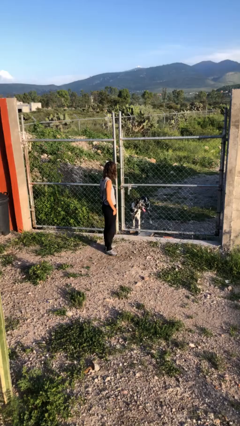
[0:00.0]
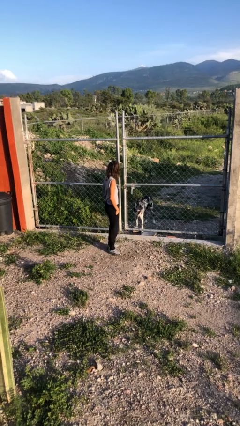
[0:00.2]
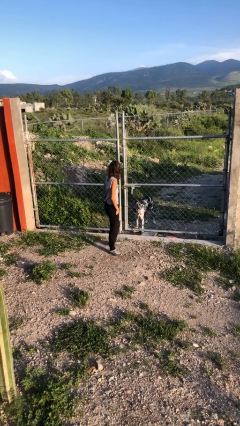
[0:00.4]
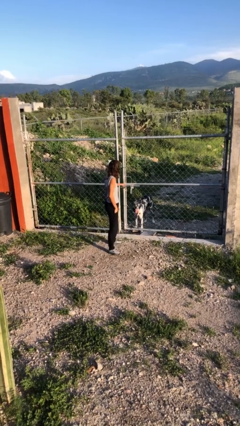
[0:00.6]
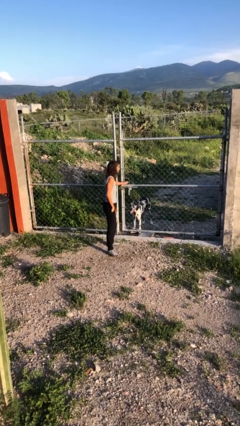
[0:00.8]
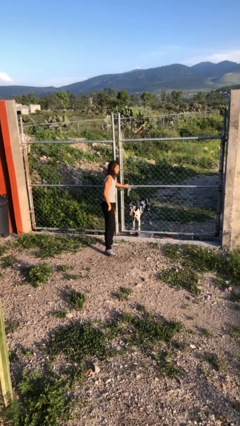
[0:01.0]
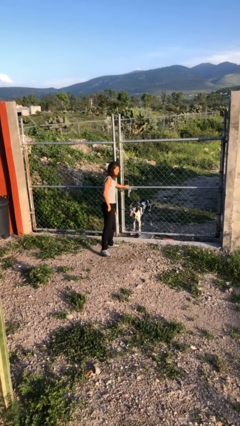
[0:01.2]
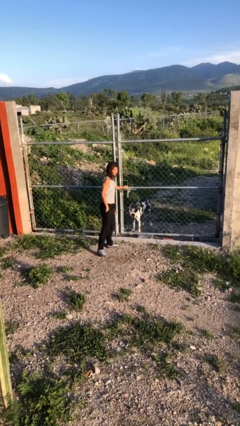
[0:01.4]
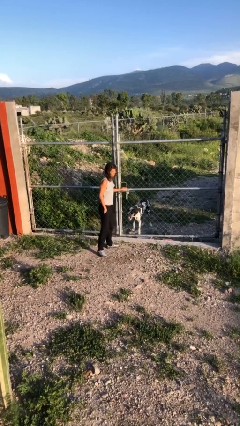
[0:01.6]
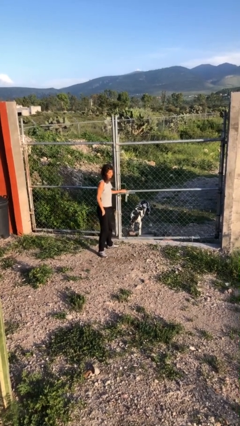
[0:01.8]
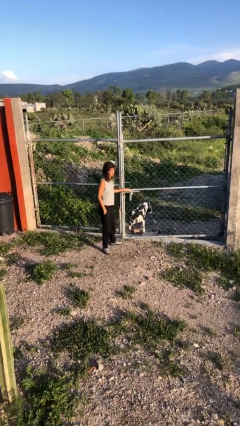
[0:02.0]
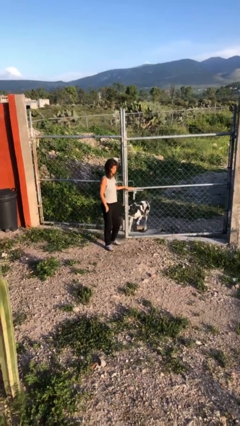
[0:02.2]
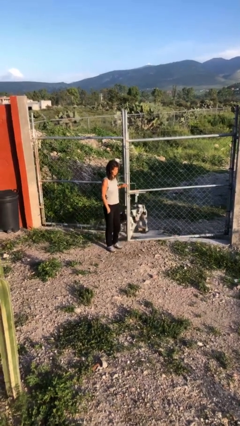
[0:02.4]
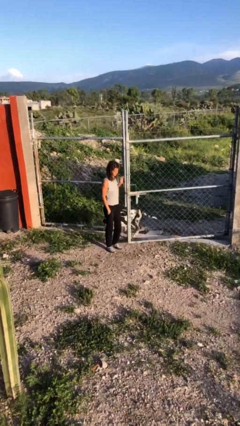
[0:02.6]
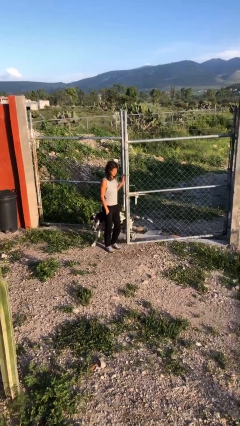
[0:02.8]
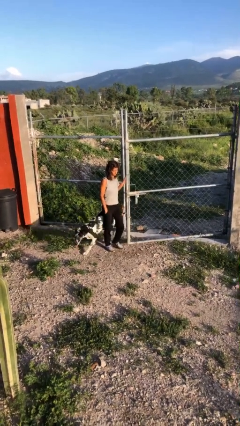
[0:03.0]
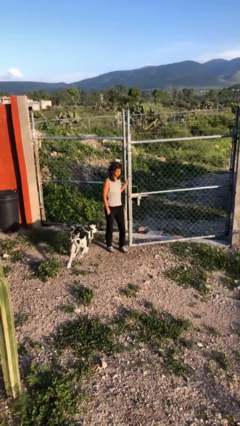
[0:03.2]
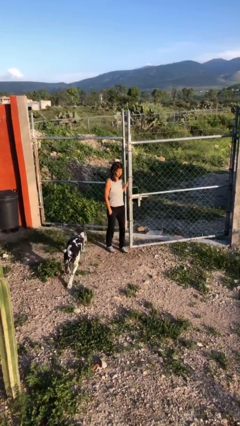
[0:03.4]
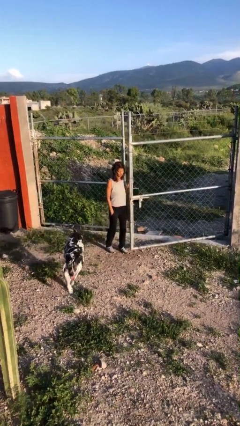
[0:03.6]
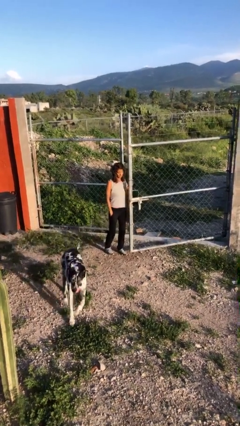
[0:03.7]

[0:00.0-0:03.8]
person opens gate

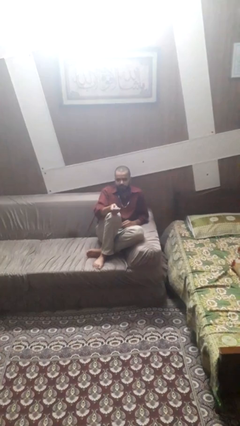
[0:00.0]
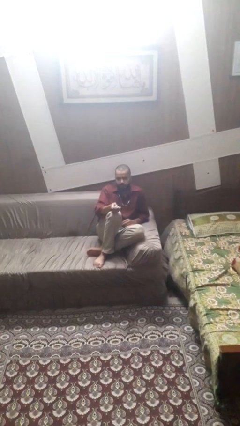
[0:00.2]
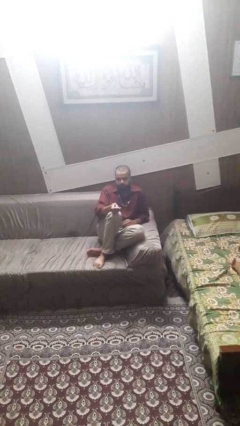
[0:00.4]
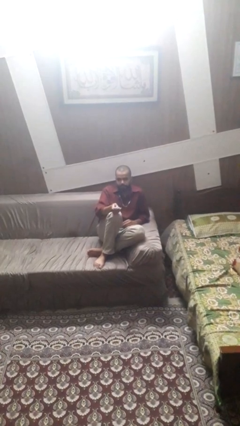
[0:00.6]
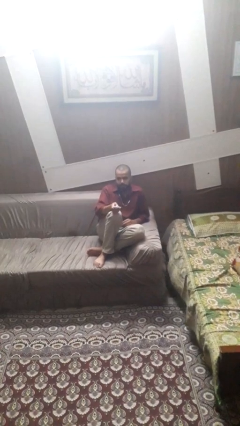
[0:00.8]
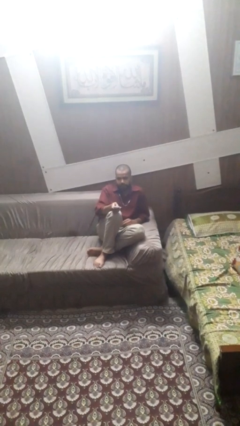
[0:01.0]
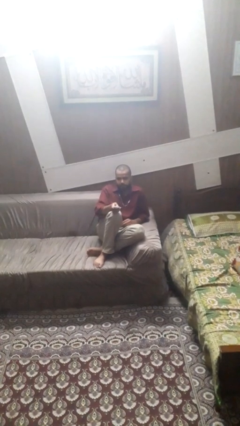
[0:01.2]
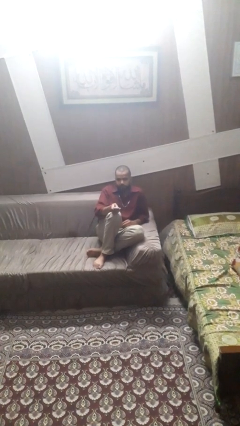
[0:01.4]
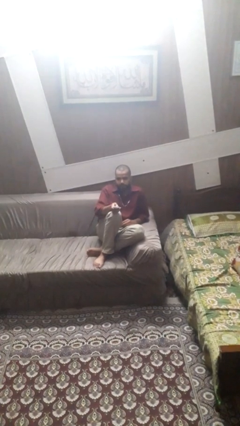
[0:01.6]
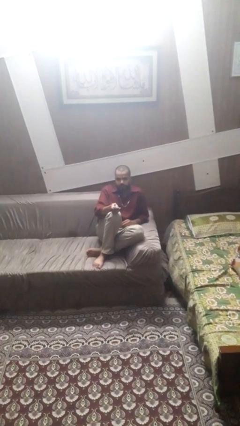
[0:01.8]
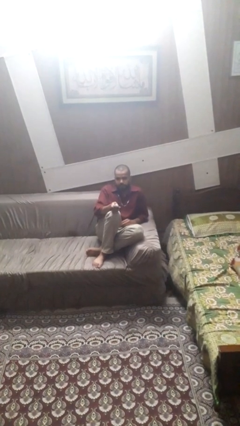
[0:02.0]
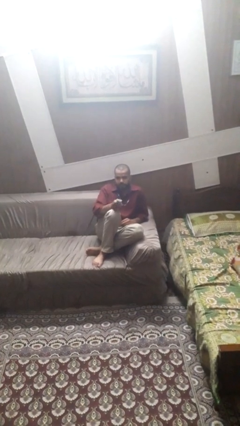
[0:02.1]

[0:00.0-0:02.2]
person uses television remote

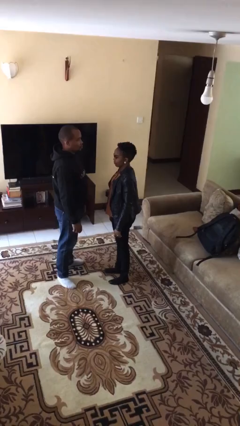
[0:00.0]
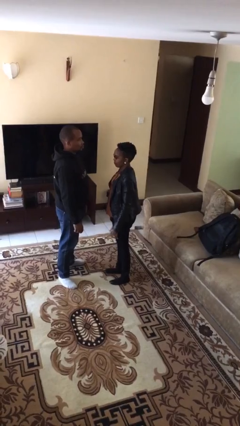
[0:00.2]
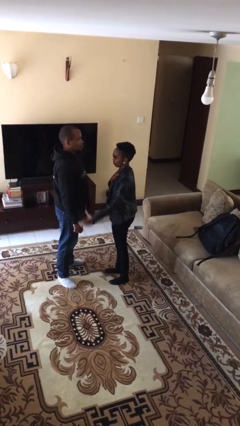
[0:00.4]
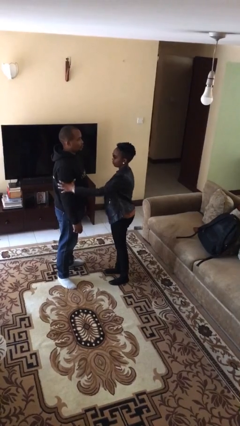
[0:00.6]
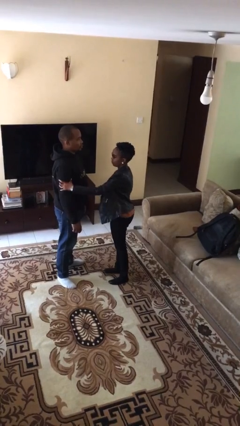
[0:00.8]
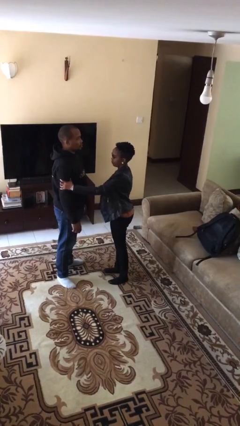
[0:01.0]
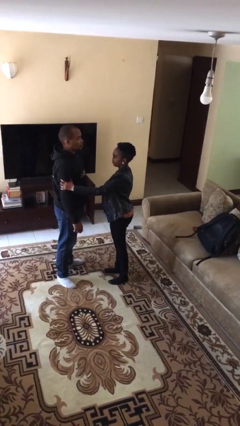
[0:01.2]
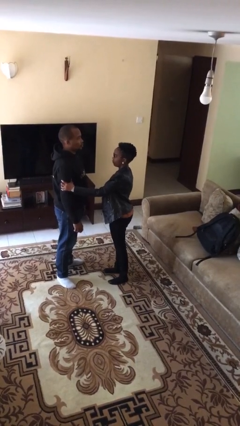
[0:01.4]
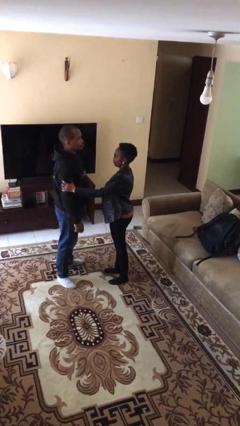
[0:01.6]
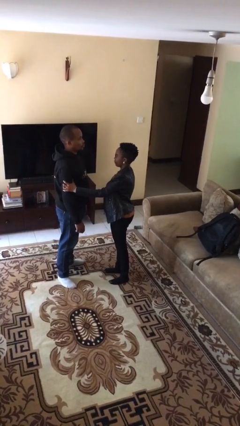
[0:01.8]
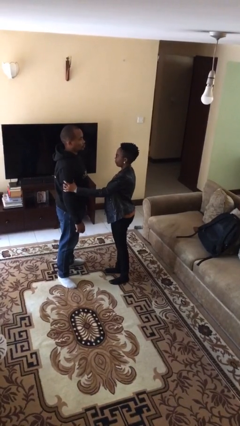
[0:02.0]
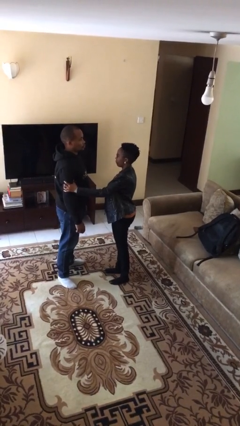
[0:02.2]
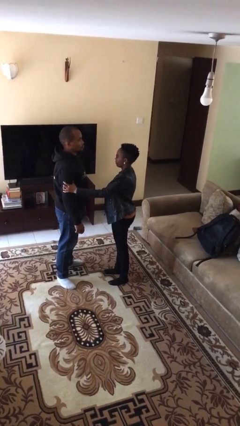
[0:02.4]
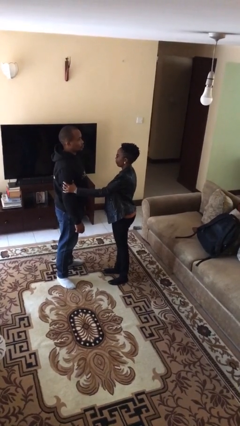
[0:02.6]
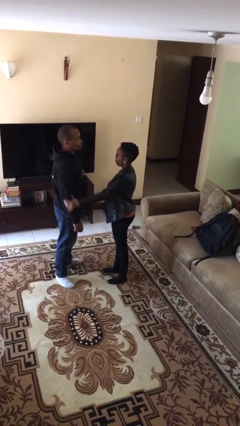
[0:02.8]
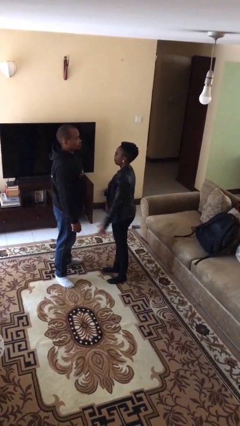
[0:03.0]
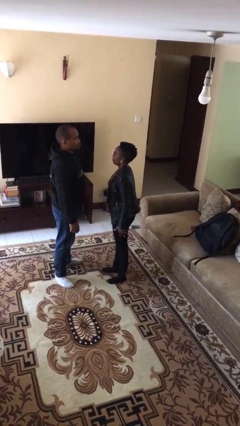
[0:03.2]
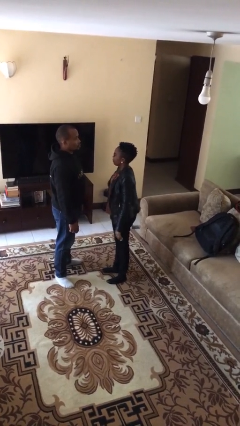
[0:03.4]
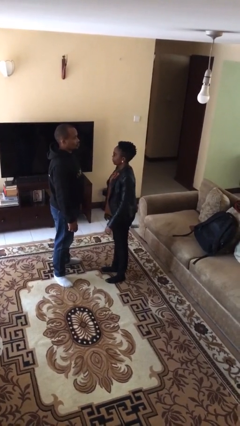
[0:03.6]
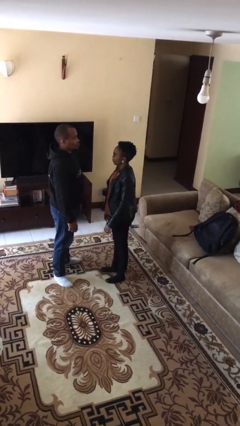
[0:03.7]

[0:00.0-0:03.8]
person grabs person by bicep

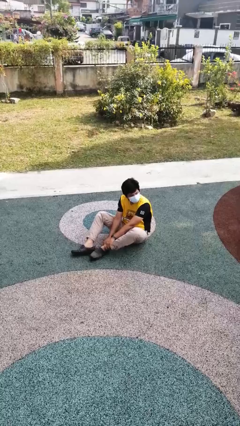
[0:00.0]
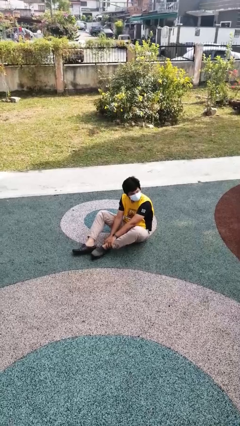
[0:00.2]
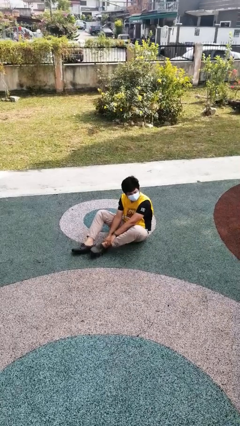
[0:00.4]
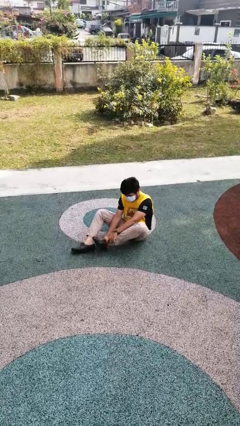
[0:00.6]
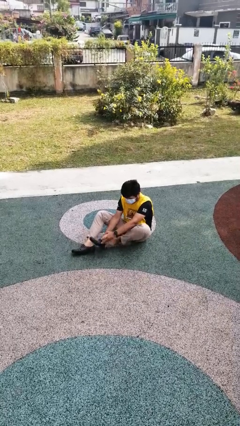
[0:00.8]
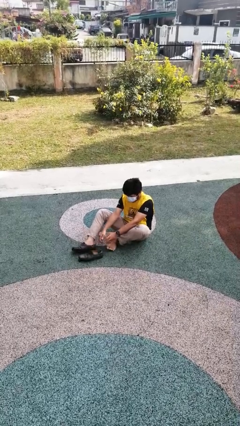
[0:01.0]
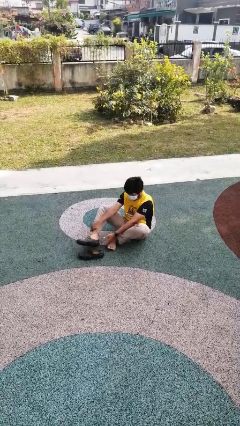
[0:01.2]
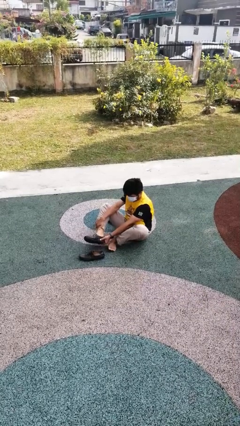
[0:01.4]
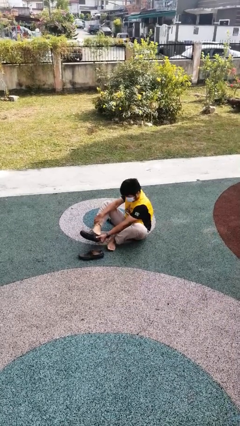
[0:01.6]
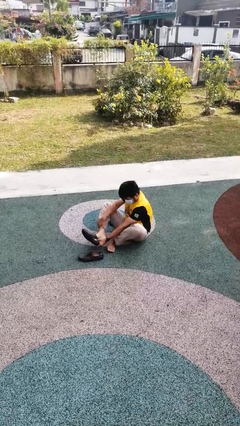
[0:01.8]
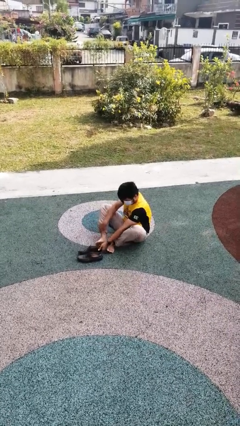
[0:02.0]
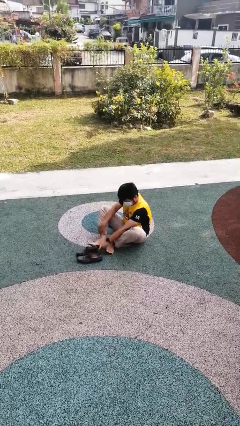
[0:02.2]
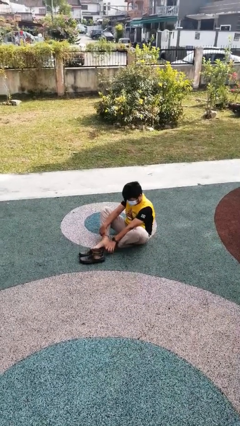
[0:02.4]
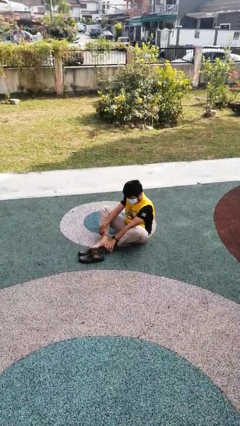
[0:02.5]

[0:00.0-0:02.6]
person takes off shoes

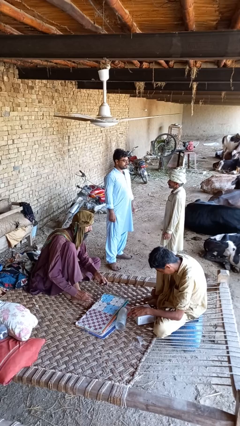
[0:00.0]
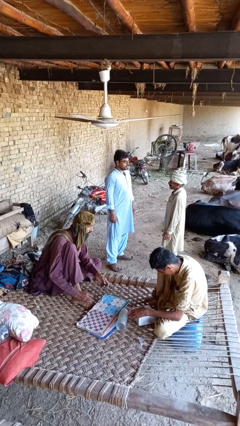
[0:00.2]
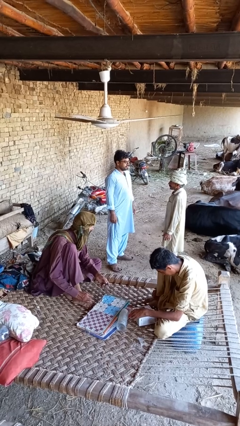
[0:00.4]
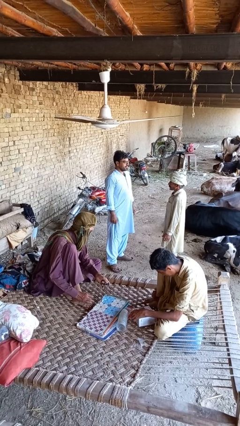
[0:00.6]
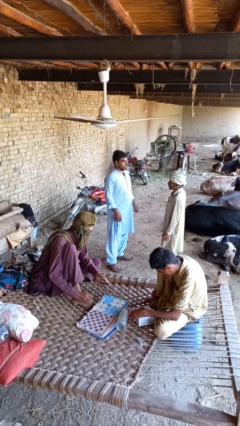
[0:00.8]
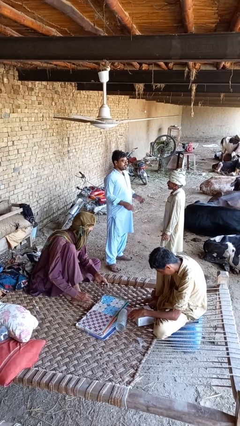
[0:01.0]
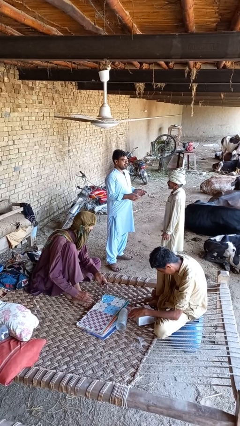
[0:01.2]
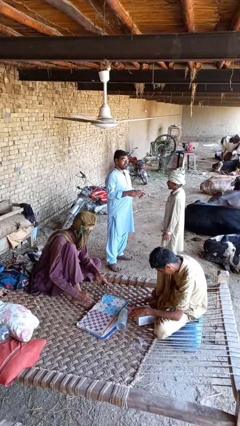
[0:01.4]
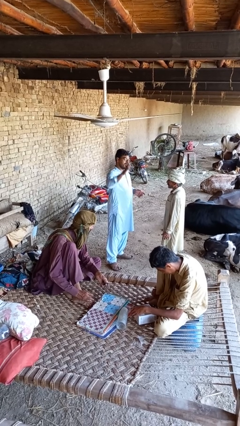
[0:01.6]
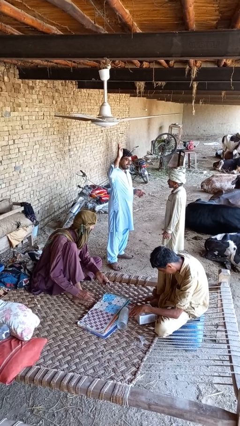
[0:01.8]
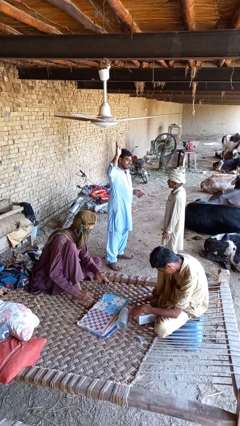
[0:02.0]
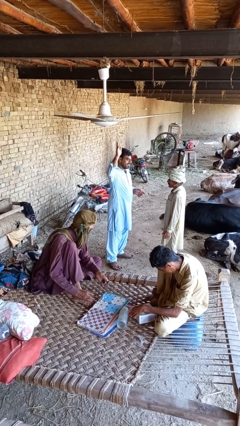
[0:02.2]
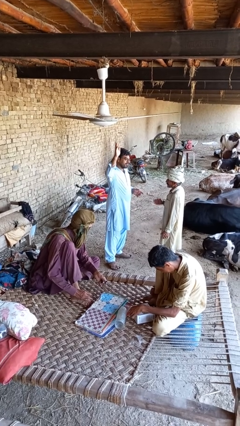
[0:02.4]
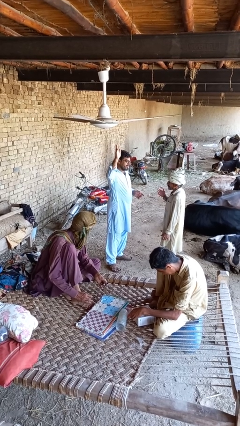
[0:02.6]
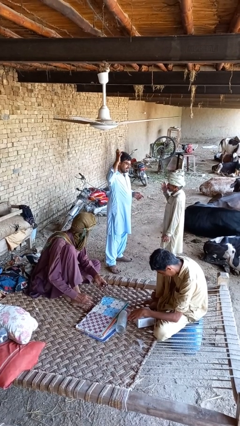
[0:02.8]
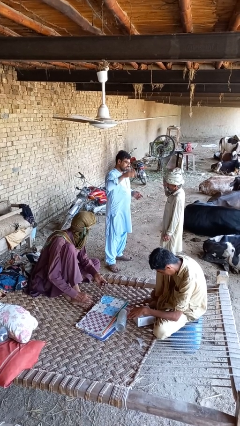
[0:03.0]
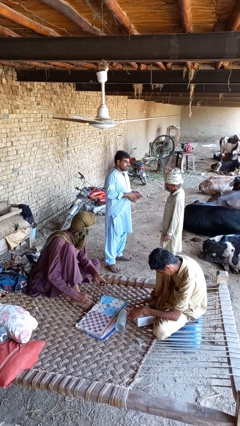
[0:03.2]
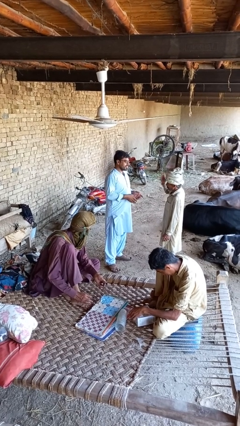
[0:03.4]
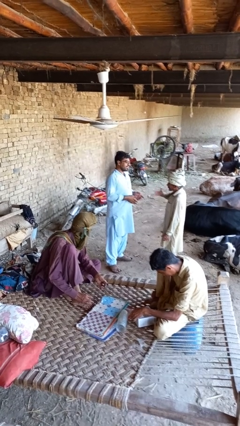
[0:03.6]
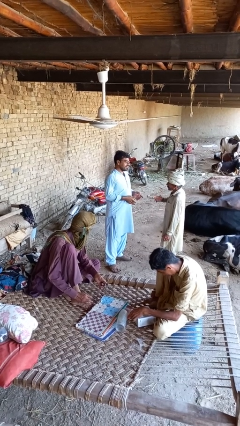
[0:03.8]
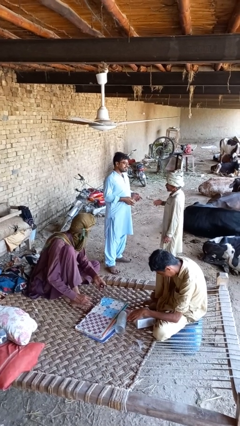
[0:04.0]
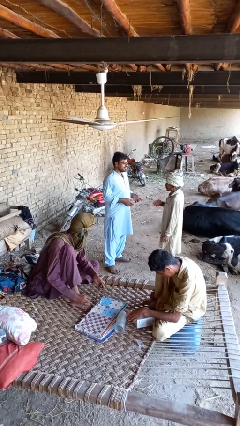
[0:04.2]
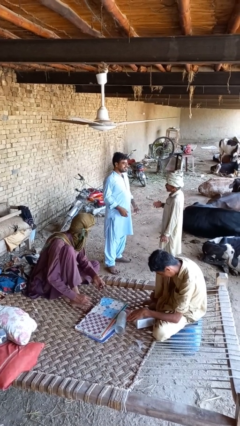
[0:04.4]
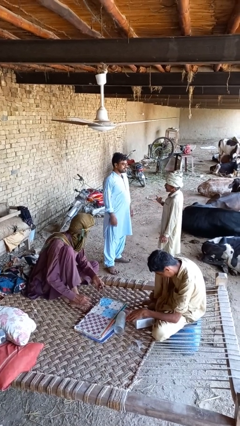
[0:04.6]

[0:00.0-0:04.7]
person talks to person

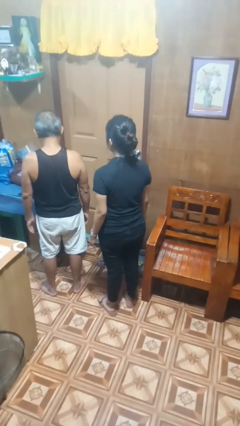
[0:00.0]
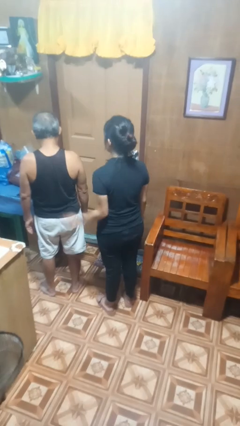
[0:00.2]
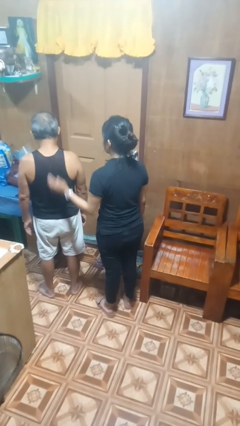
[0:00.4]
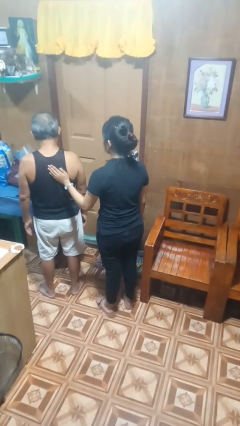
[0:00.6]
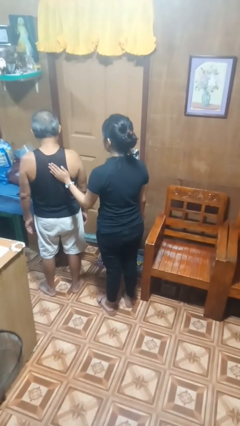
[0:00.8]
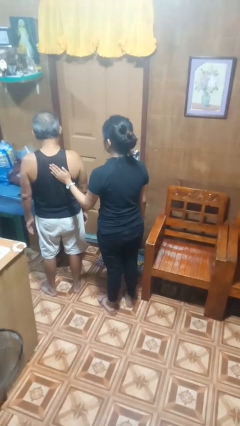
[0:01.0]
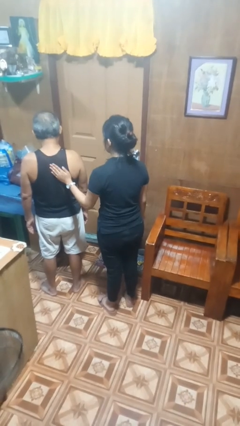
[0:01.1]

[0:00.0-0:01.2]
person touches back of person
